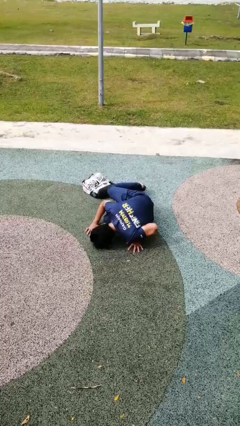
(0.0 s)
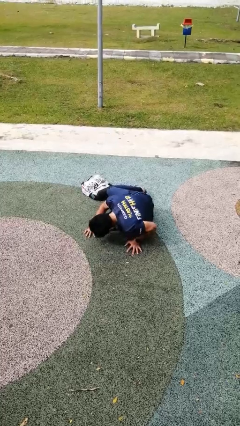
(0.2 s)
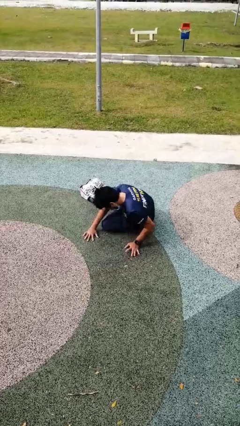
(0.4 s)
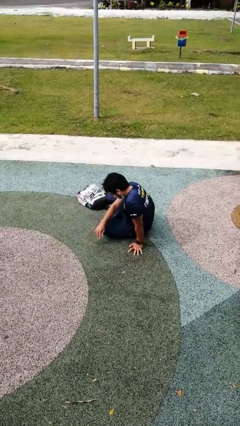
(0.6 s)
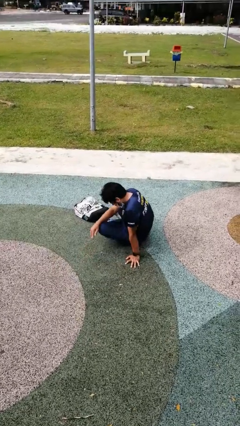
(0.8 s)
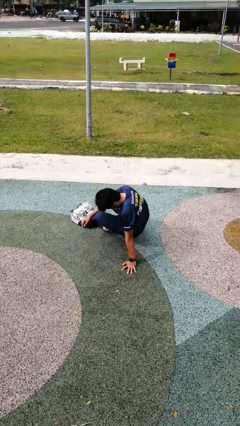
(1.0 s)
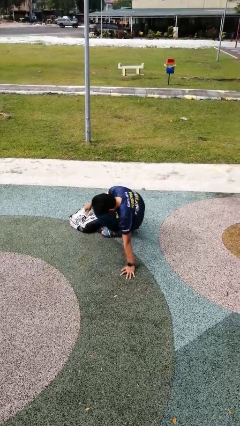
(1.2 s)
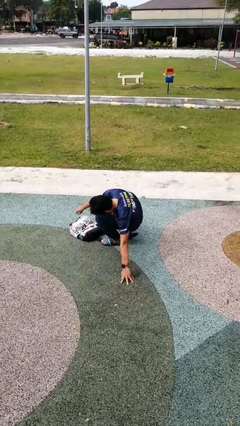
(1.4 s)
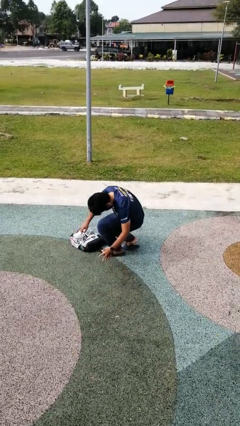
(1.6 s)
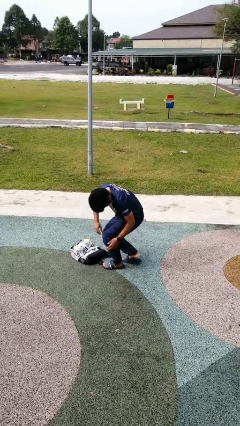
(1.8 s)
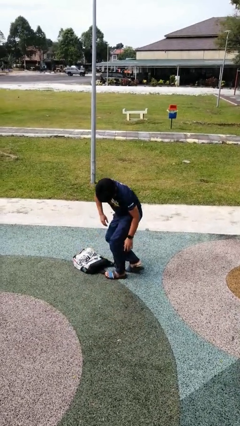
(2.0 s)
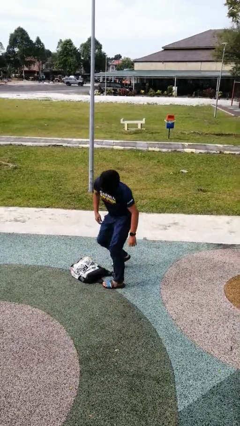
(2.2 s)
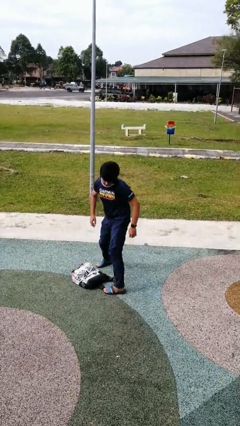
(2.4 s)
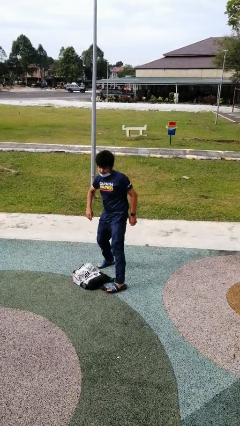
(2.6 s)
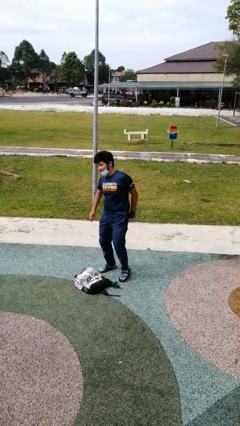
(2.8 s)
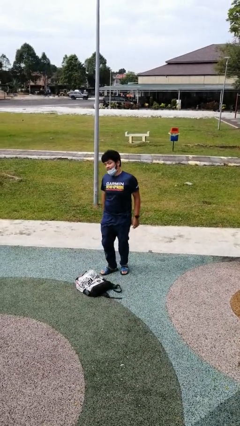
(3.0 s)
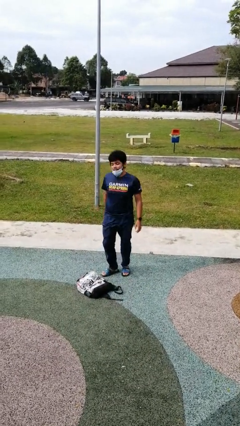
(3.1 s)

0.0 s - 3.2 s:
person stands up from floor

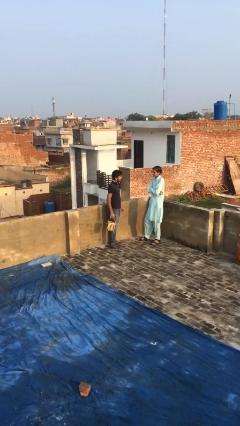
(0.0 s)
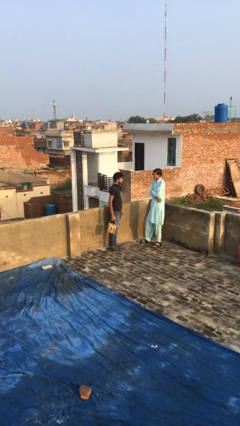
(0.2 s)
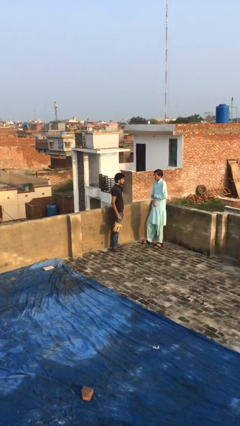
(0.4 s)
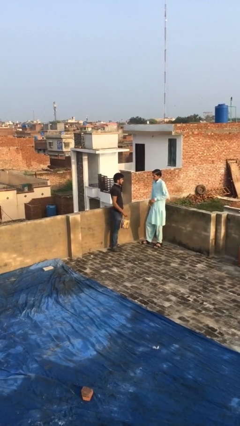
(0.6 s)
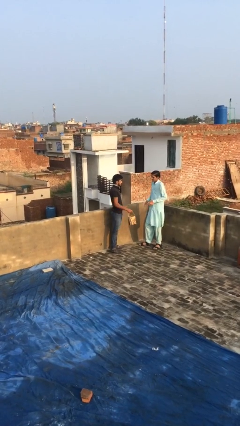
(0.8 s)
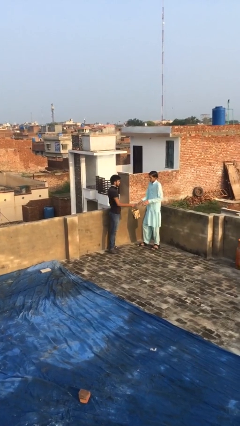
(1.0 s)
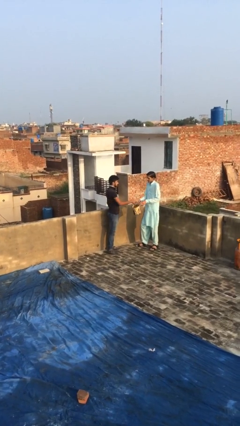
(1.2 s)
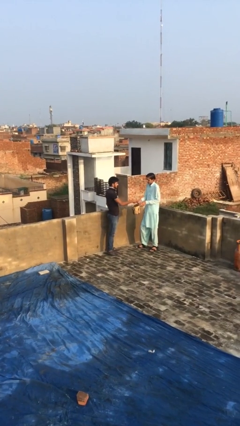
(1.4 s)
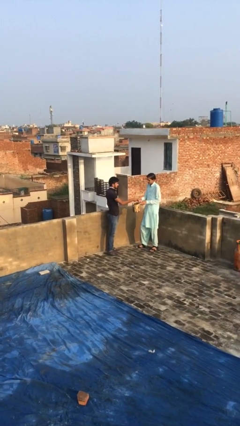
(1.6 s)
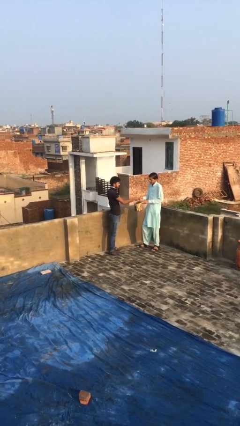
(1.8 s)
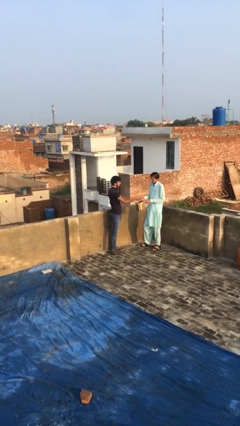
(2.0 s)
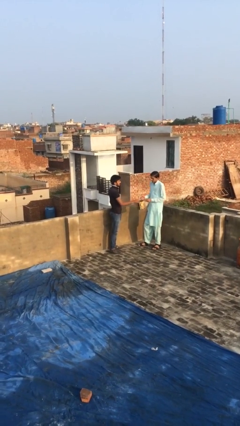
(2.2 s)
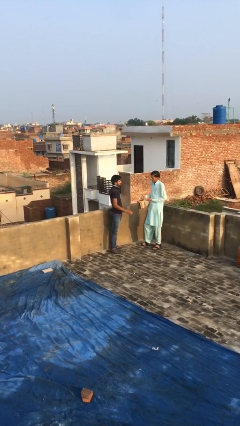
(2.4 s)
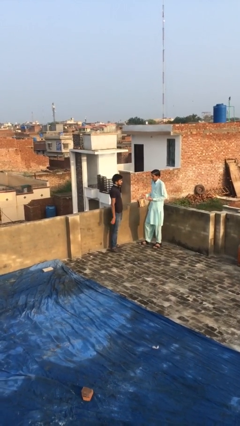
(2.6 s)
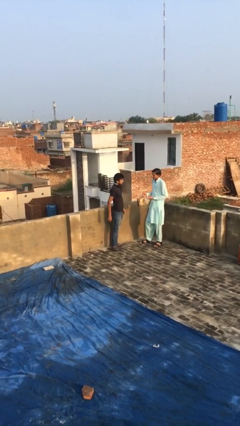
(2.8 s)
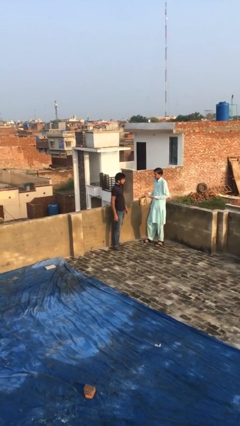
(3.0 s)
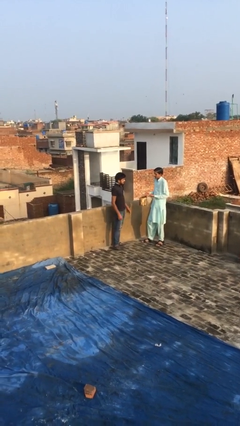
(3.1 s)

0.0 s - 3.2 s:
person transfers object to person

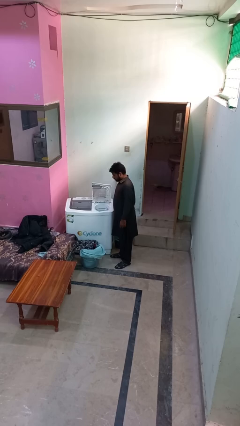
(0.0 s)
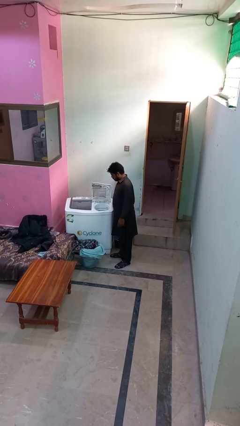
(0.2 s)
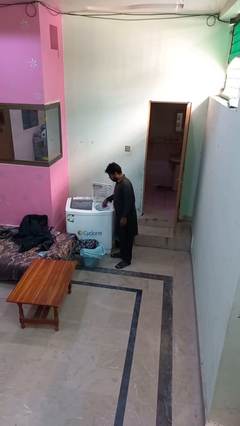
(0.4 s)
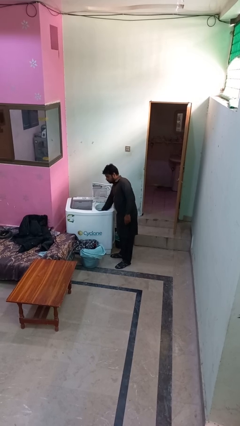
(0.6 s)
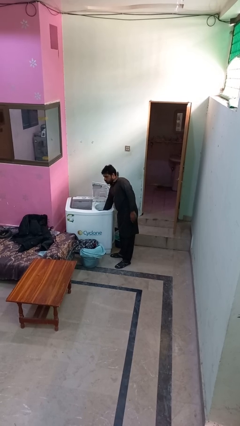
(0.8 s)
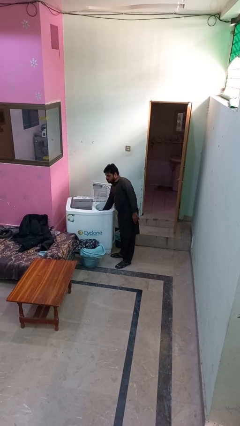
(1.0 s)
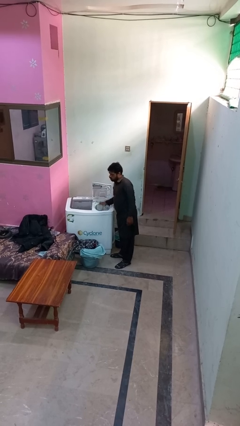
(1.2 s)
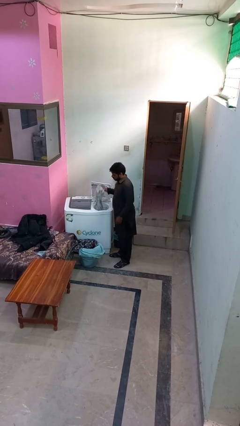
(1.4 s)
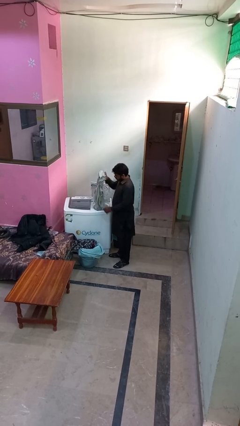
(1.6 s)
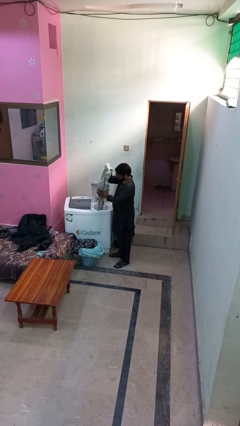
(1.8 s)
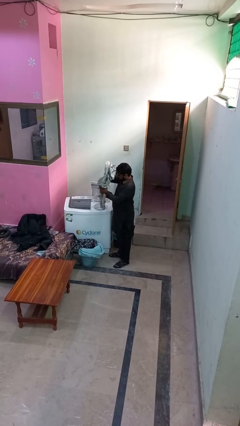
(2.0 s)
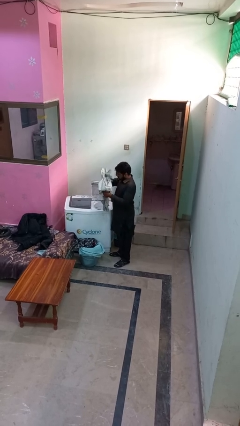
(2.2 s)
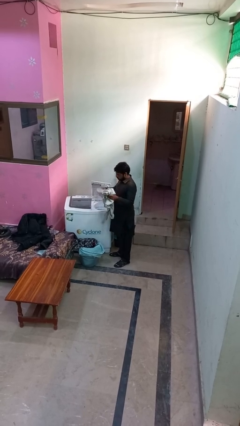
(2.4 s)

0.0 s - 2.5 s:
person unloads dryer

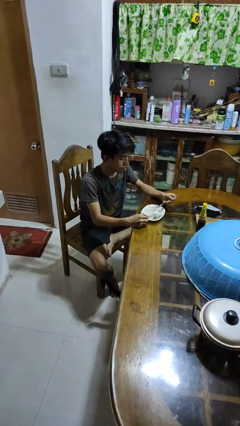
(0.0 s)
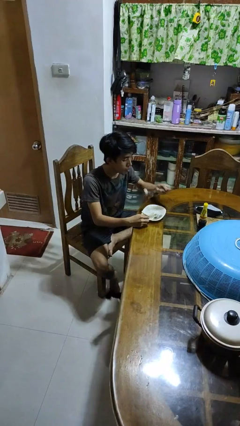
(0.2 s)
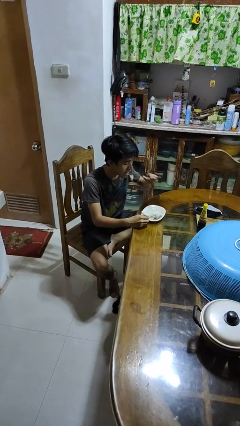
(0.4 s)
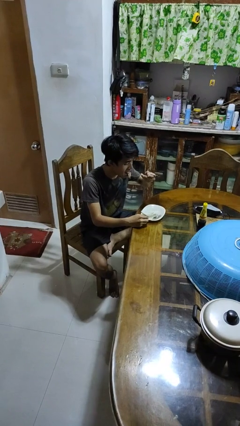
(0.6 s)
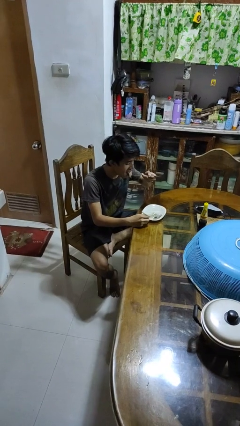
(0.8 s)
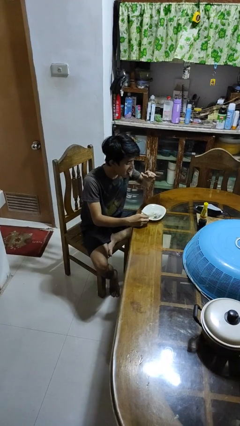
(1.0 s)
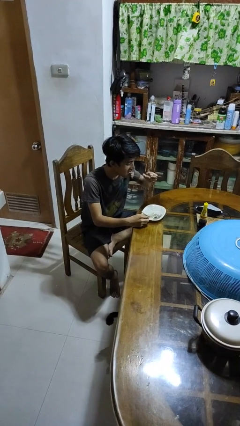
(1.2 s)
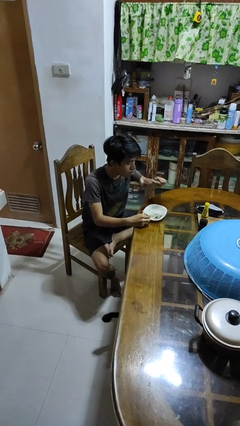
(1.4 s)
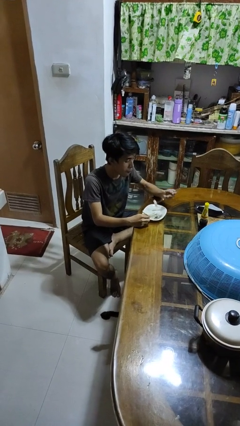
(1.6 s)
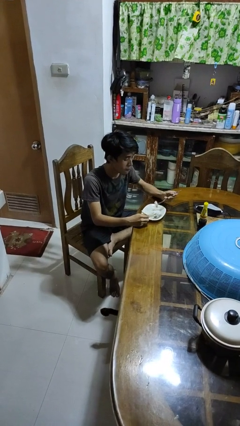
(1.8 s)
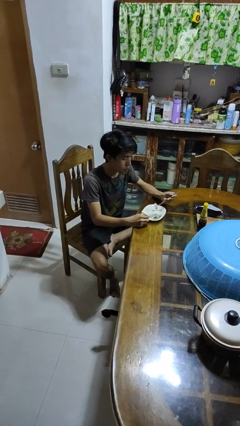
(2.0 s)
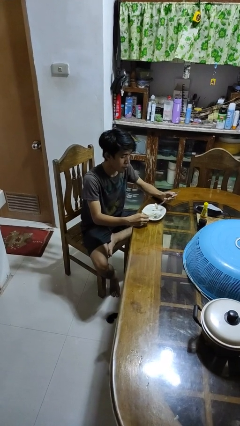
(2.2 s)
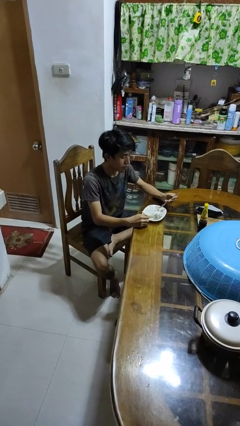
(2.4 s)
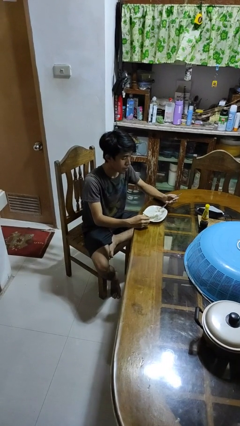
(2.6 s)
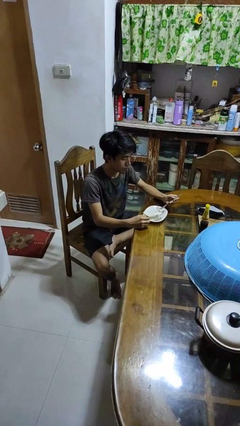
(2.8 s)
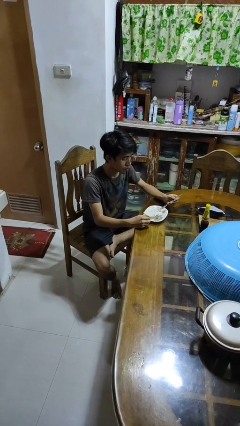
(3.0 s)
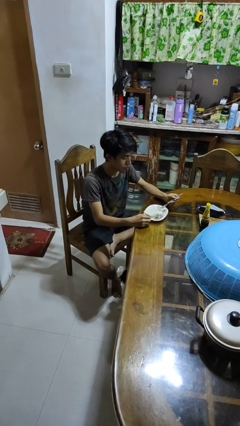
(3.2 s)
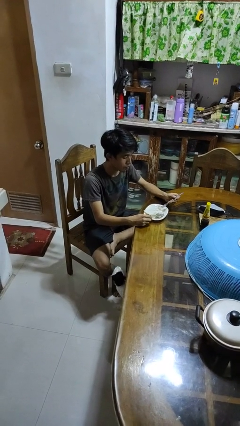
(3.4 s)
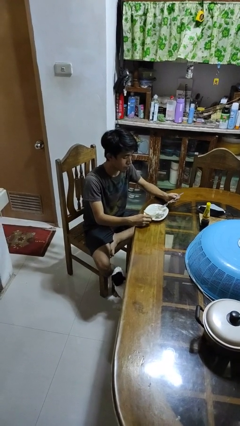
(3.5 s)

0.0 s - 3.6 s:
person eats with utensil

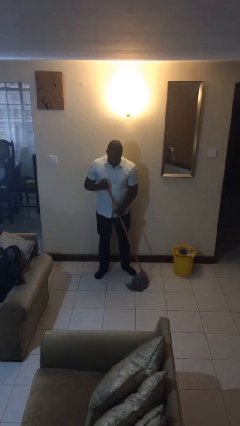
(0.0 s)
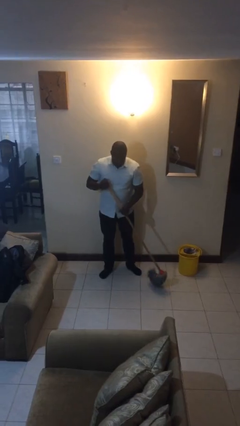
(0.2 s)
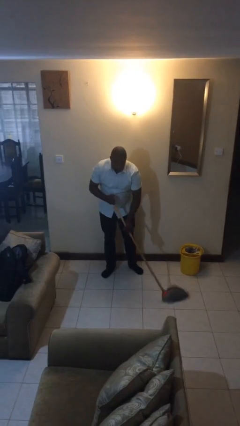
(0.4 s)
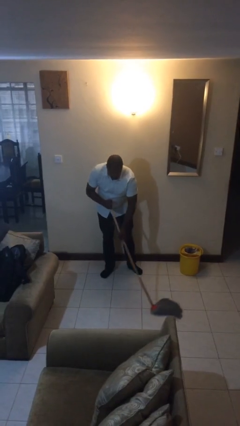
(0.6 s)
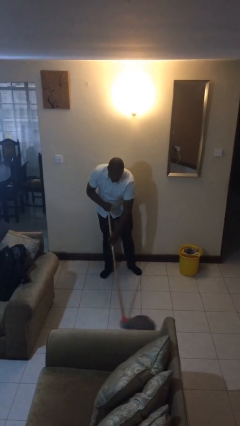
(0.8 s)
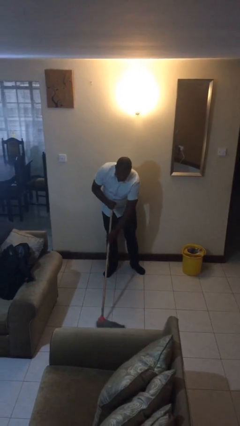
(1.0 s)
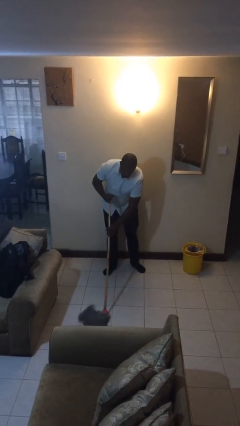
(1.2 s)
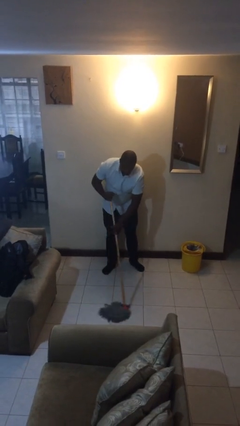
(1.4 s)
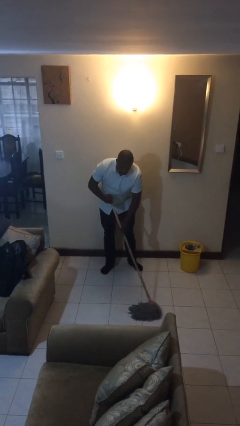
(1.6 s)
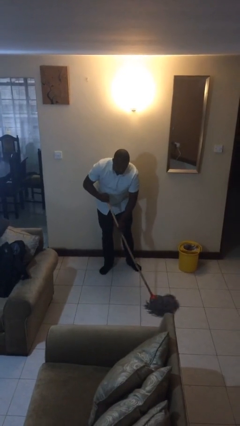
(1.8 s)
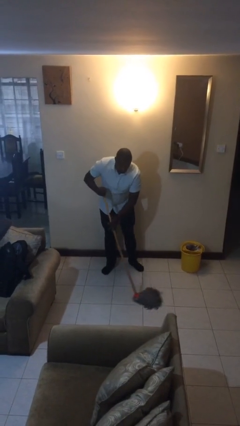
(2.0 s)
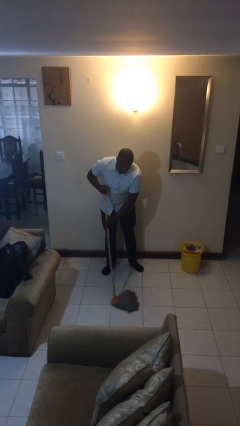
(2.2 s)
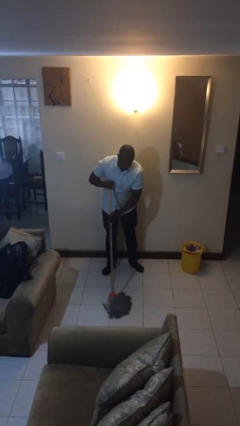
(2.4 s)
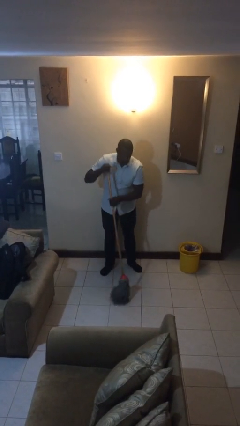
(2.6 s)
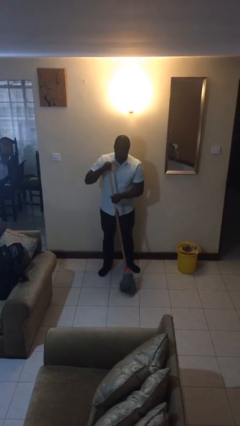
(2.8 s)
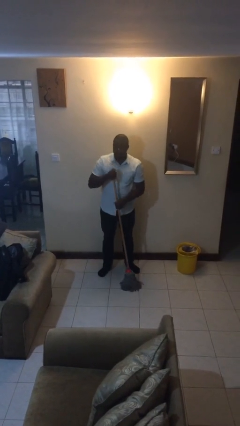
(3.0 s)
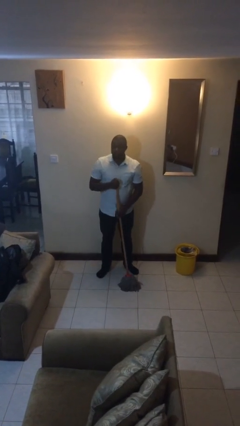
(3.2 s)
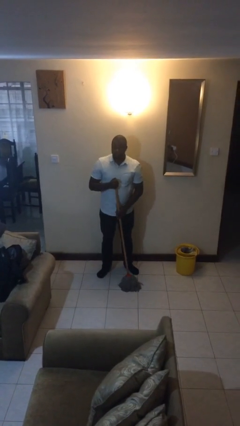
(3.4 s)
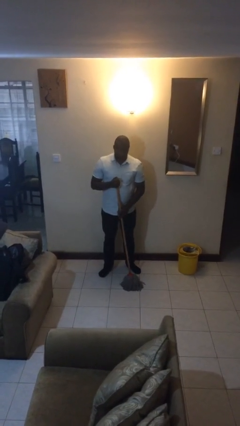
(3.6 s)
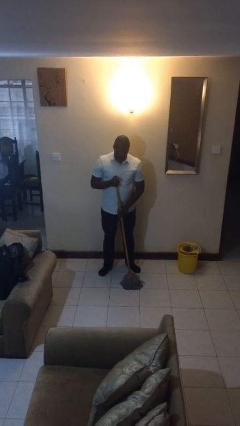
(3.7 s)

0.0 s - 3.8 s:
person mops

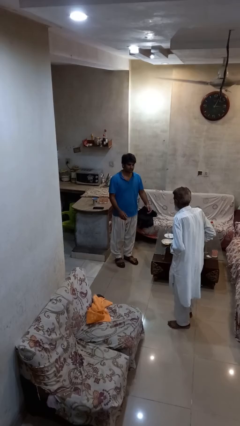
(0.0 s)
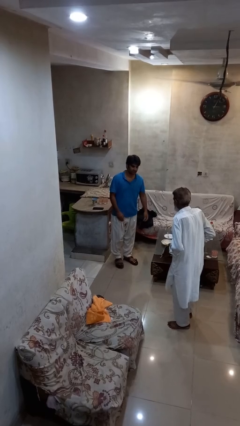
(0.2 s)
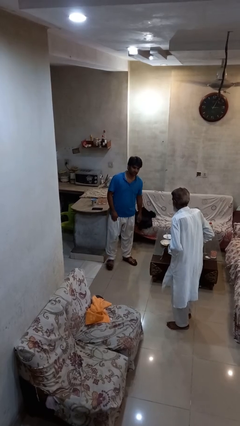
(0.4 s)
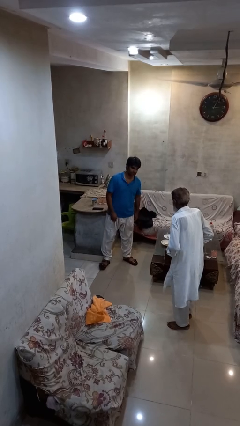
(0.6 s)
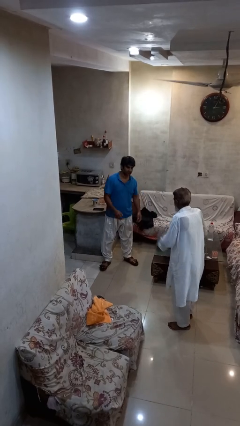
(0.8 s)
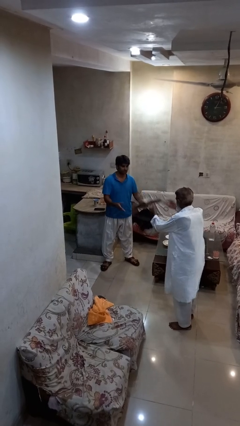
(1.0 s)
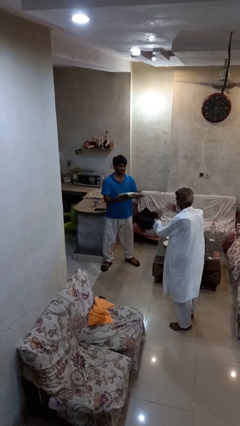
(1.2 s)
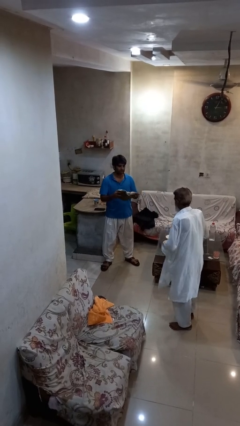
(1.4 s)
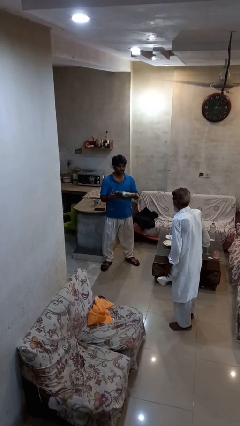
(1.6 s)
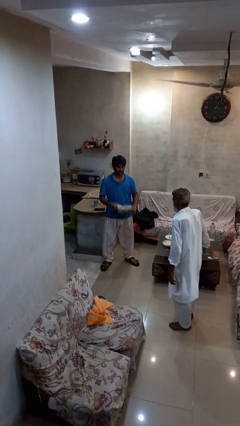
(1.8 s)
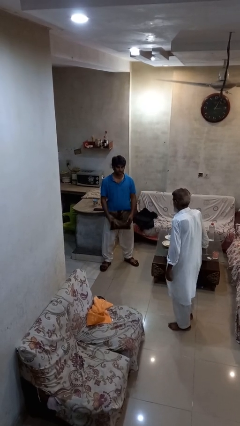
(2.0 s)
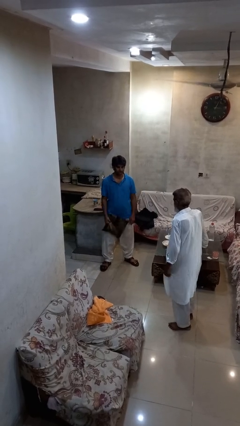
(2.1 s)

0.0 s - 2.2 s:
person catches object from person
